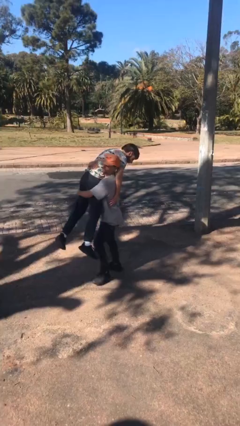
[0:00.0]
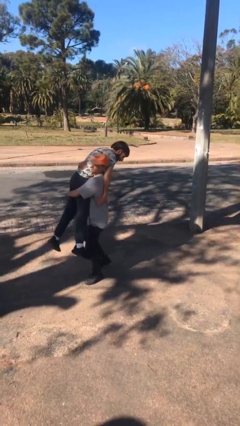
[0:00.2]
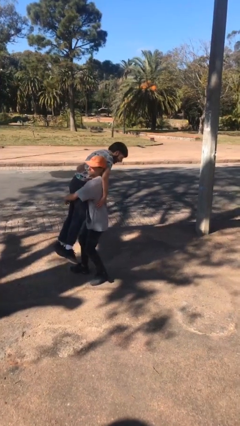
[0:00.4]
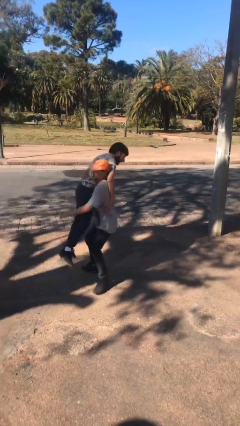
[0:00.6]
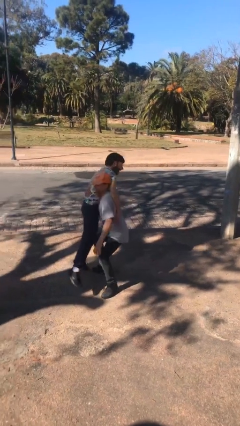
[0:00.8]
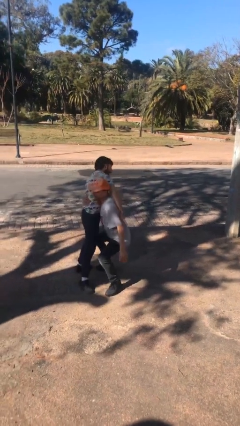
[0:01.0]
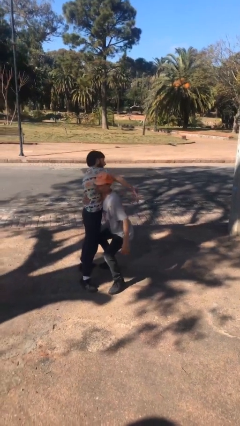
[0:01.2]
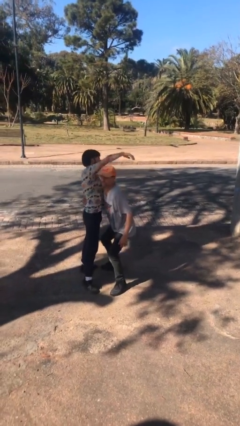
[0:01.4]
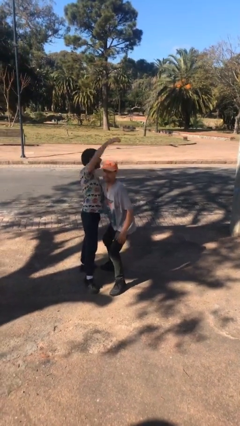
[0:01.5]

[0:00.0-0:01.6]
person puts down person

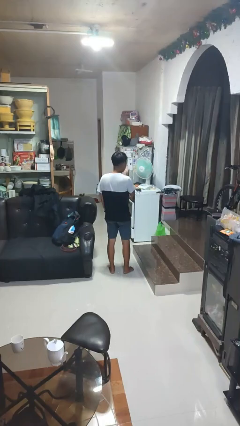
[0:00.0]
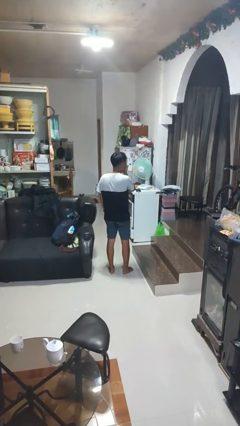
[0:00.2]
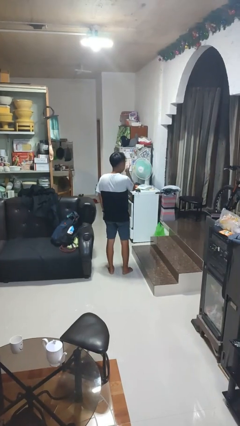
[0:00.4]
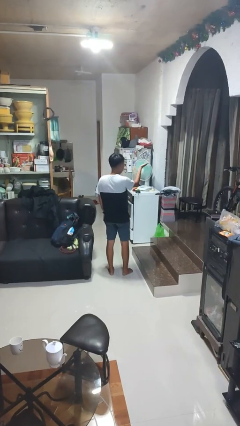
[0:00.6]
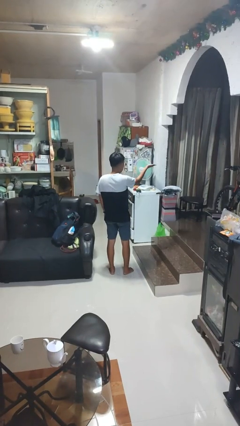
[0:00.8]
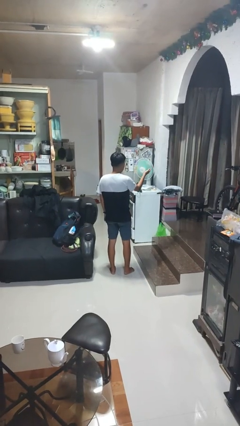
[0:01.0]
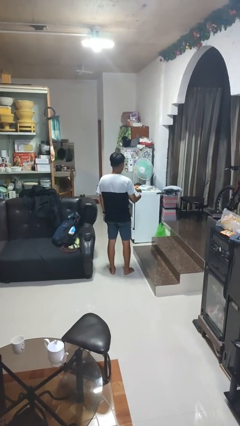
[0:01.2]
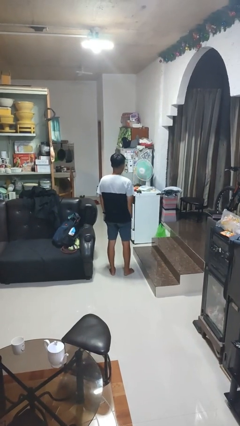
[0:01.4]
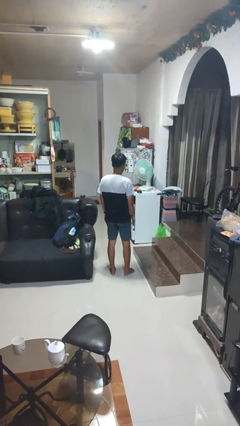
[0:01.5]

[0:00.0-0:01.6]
person gestures blow kiss

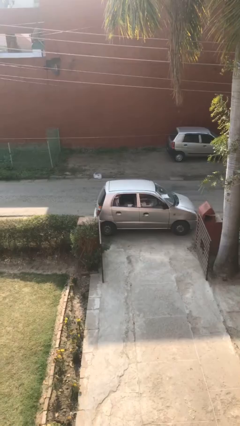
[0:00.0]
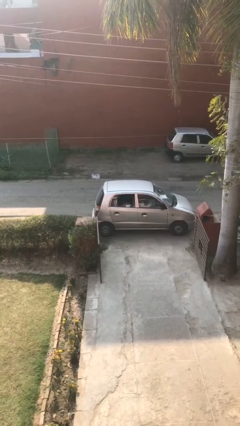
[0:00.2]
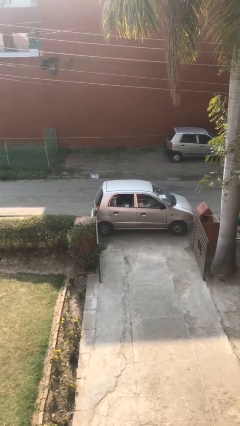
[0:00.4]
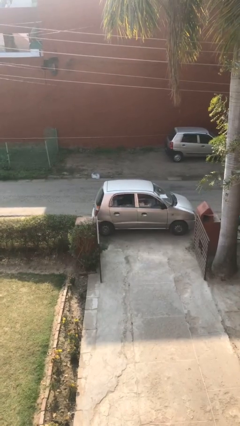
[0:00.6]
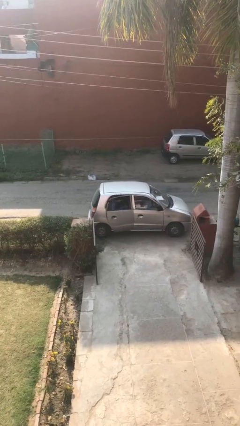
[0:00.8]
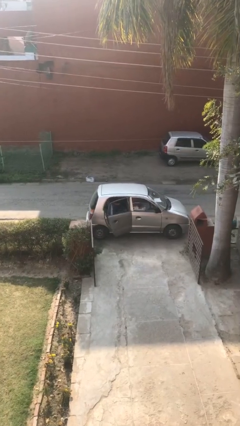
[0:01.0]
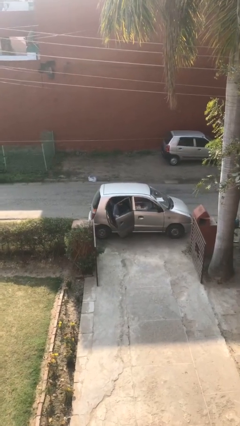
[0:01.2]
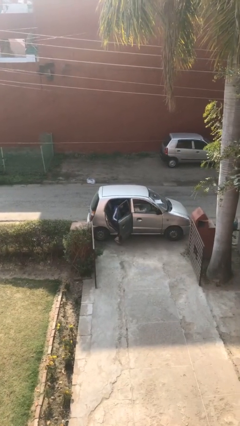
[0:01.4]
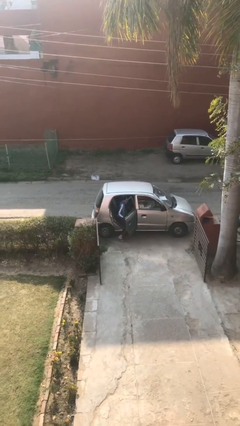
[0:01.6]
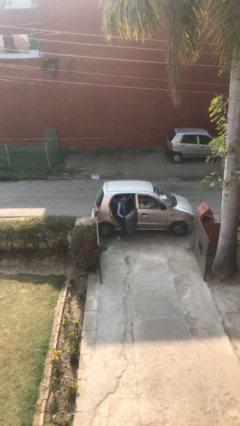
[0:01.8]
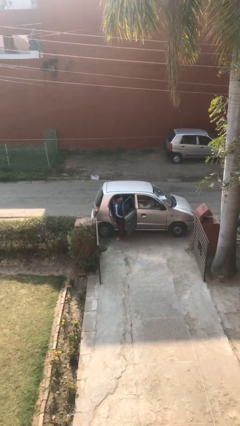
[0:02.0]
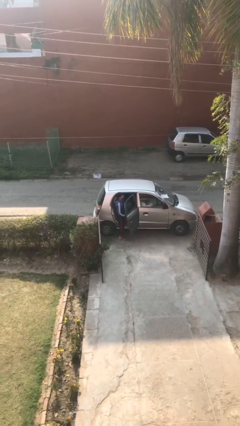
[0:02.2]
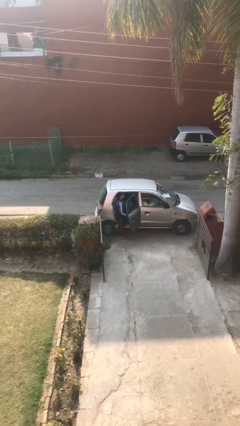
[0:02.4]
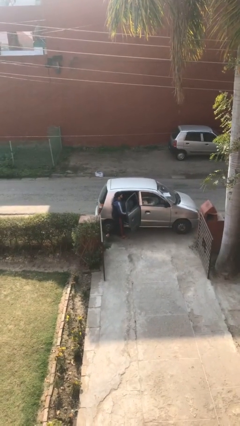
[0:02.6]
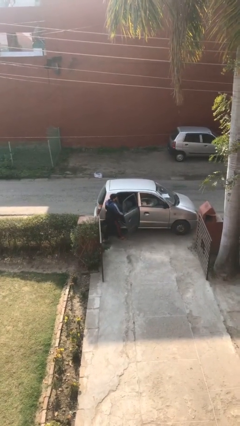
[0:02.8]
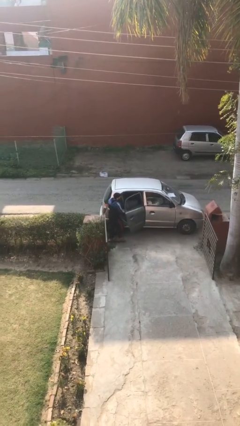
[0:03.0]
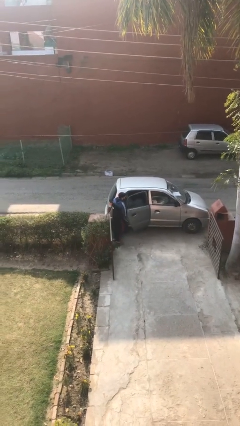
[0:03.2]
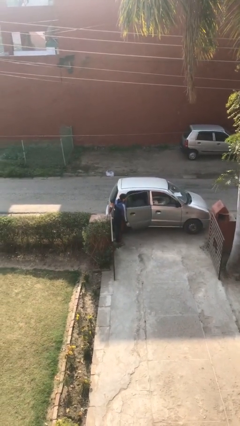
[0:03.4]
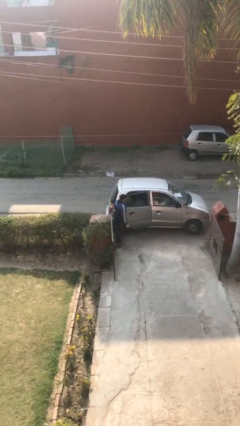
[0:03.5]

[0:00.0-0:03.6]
car drops off person

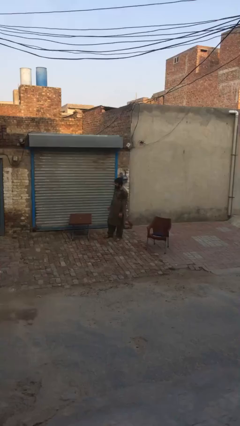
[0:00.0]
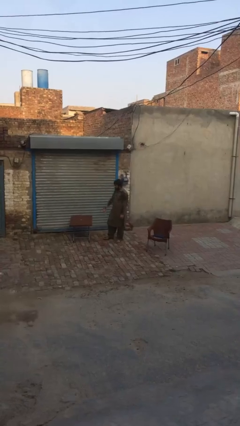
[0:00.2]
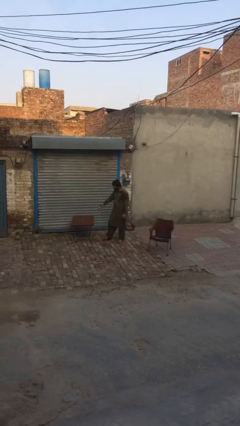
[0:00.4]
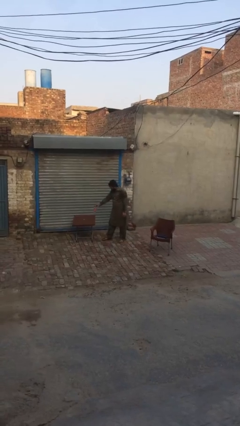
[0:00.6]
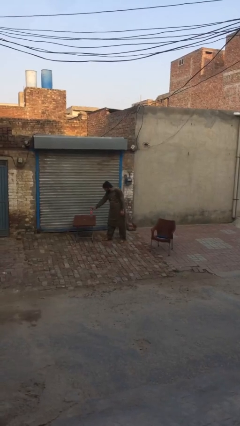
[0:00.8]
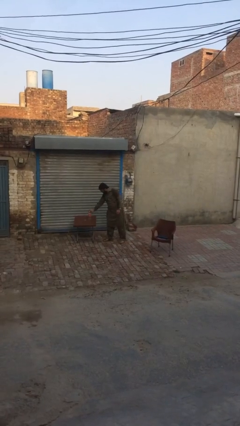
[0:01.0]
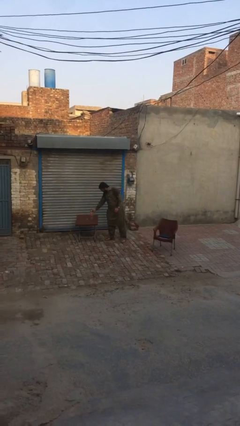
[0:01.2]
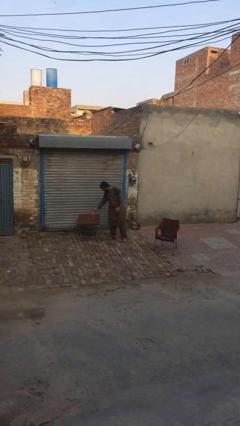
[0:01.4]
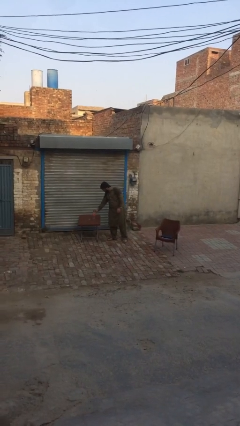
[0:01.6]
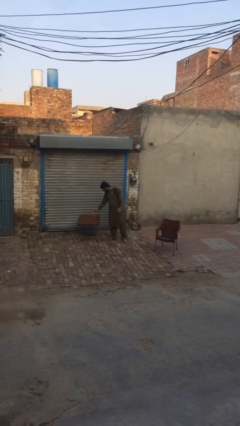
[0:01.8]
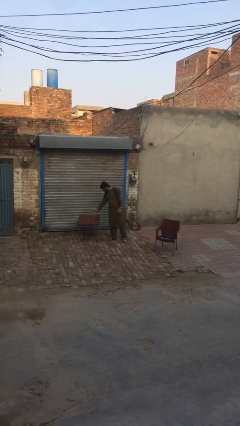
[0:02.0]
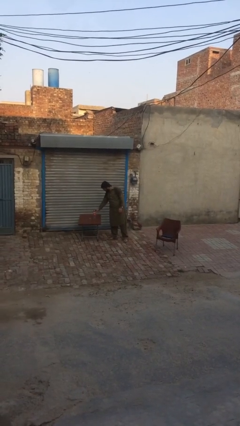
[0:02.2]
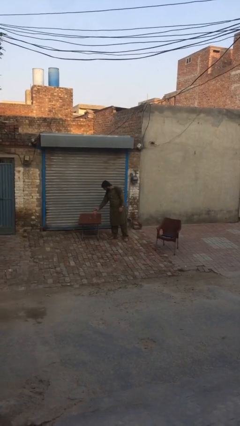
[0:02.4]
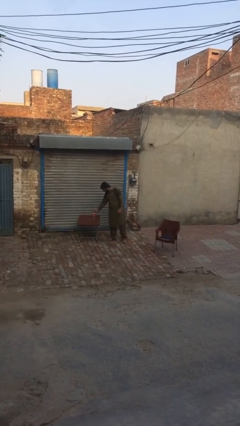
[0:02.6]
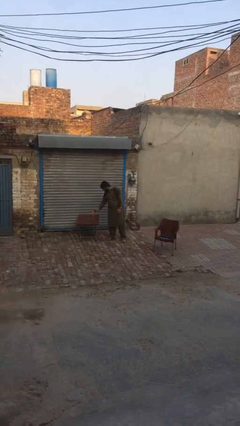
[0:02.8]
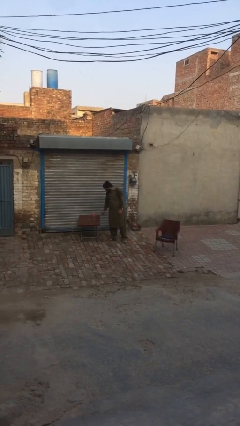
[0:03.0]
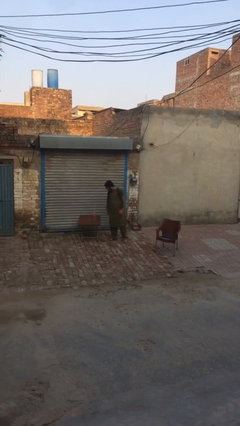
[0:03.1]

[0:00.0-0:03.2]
person puts down object on table

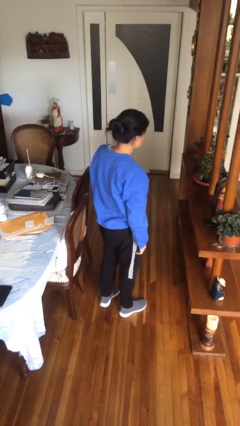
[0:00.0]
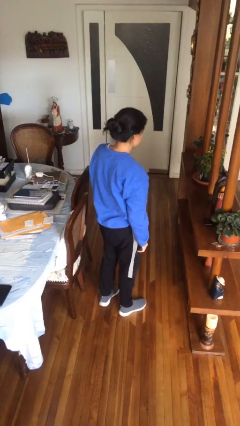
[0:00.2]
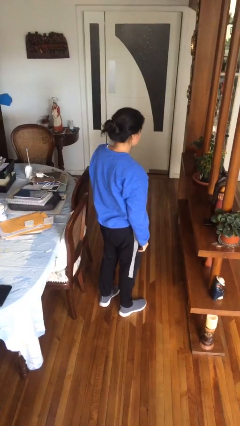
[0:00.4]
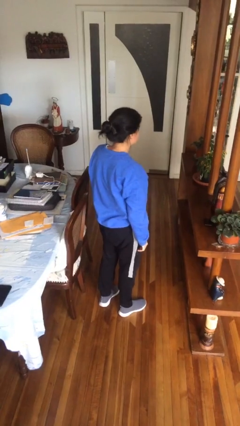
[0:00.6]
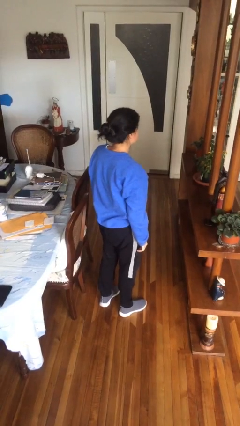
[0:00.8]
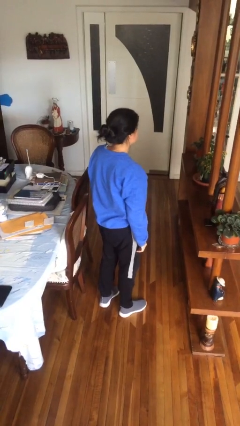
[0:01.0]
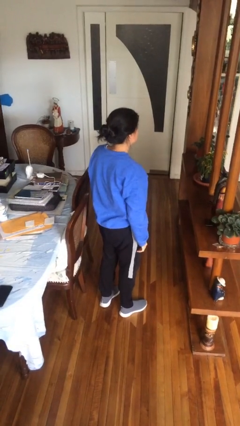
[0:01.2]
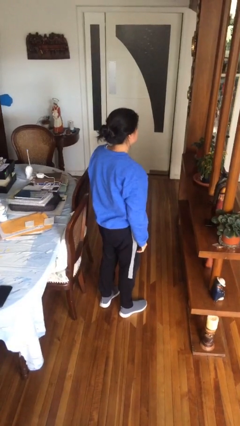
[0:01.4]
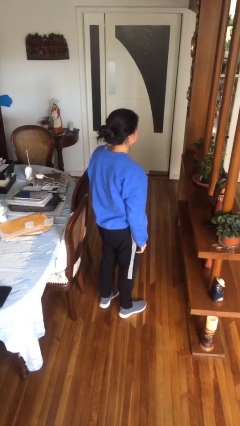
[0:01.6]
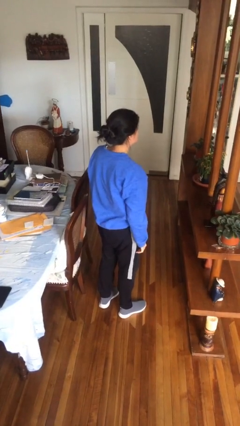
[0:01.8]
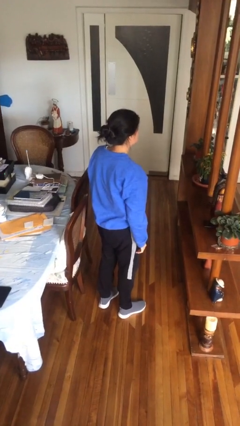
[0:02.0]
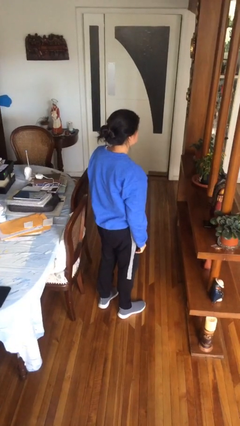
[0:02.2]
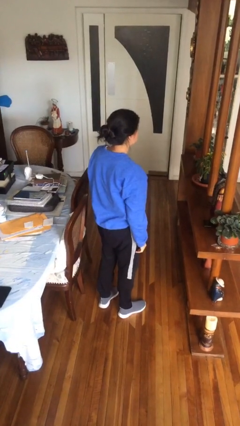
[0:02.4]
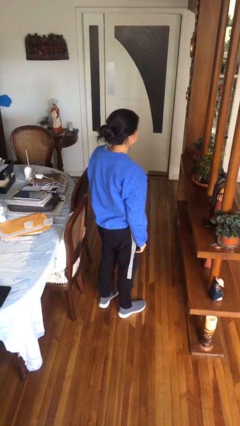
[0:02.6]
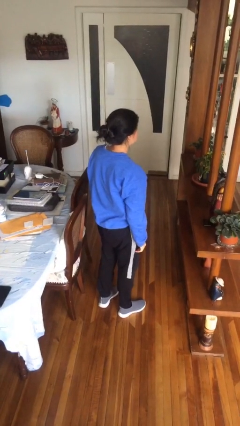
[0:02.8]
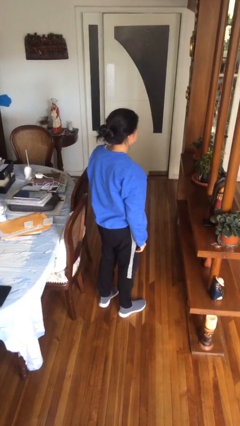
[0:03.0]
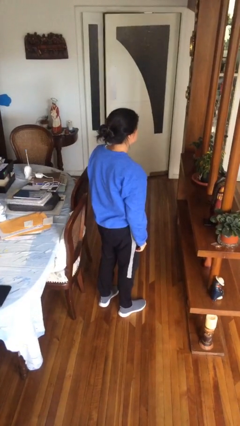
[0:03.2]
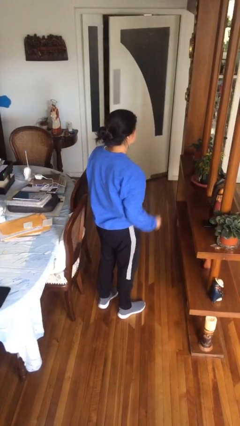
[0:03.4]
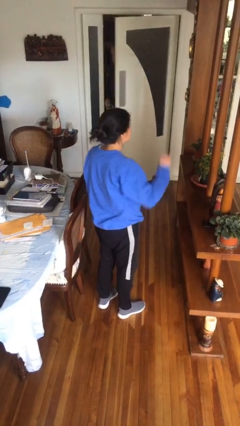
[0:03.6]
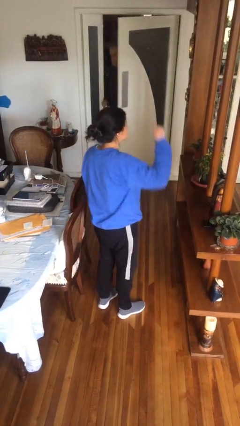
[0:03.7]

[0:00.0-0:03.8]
person gestures lower hand

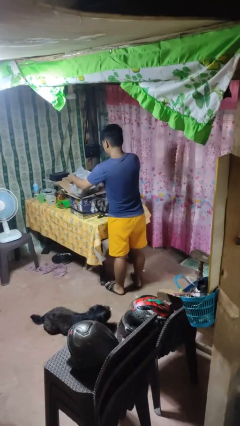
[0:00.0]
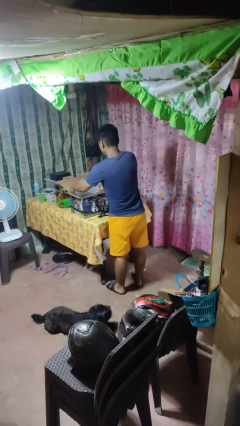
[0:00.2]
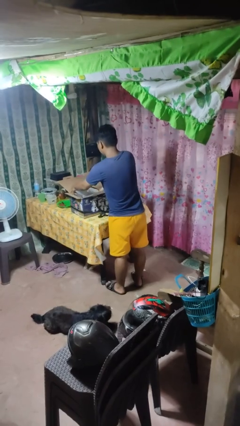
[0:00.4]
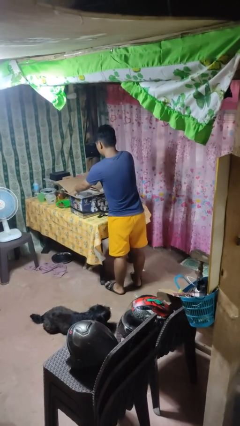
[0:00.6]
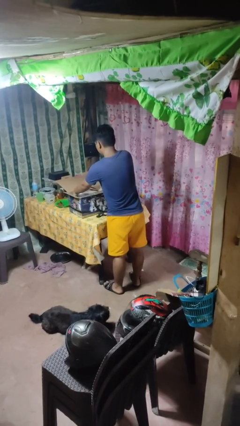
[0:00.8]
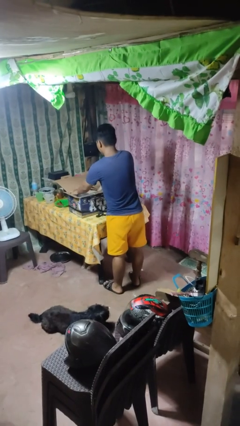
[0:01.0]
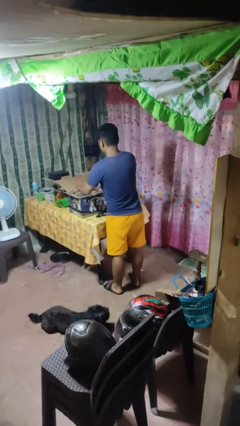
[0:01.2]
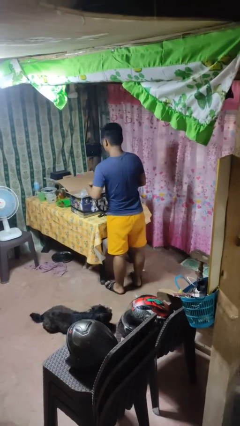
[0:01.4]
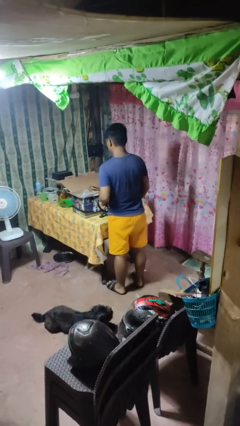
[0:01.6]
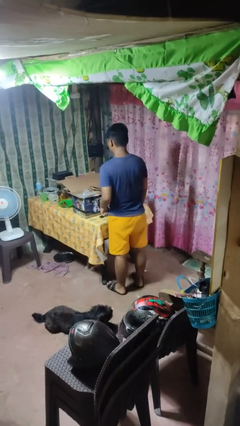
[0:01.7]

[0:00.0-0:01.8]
person puts object into box

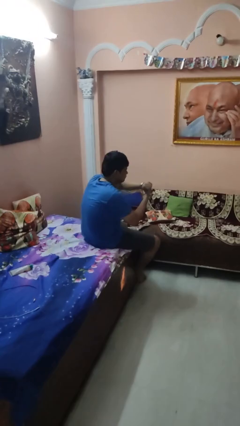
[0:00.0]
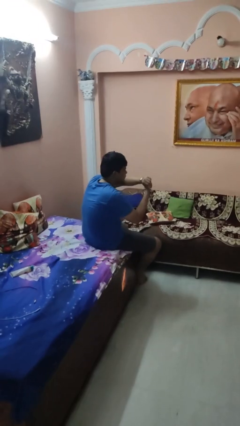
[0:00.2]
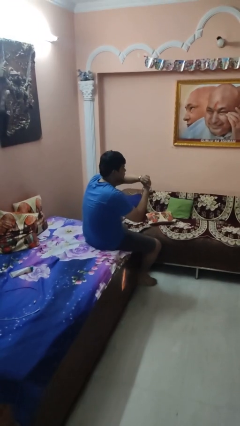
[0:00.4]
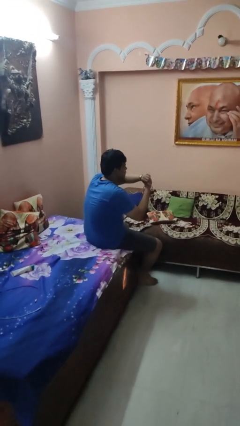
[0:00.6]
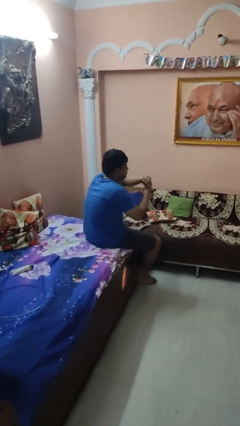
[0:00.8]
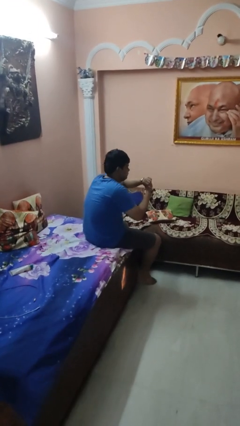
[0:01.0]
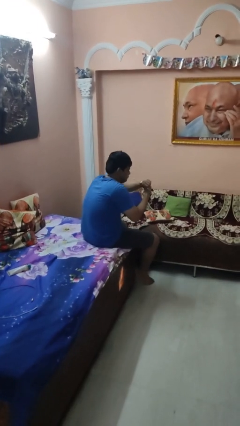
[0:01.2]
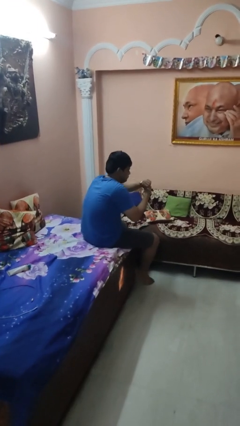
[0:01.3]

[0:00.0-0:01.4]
person looks at wristwatch
